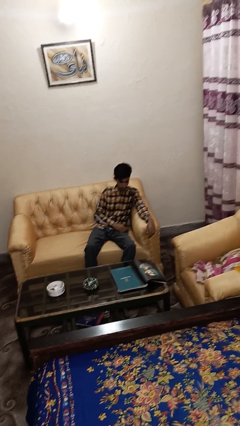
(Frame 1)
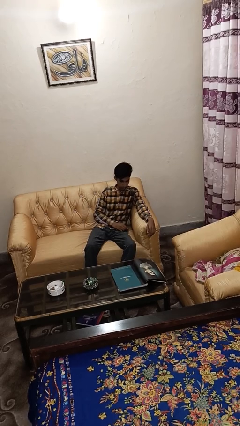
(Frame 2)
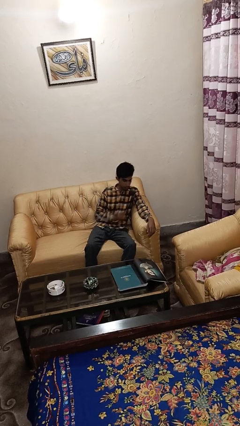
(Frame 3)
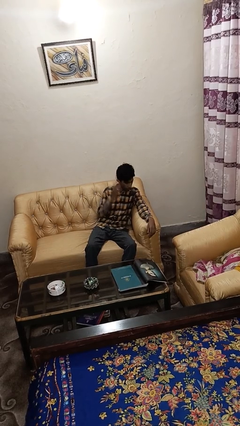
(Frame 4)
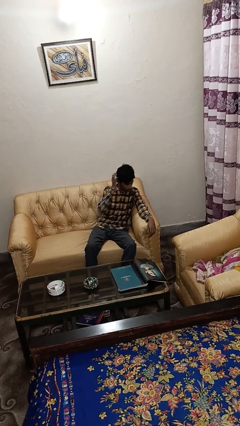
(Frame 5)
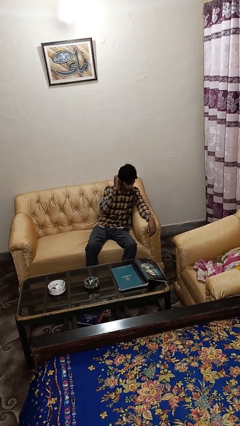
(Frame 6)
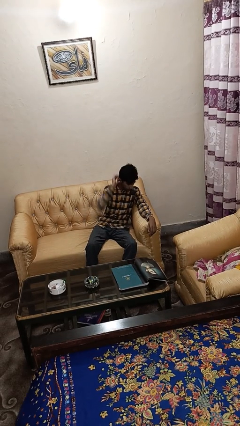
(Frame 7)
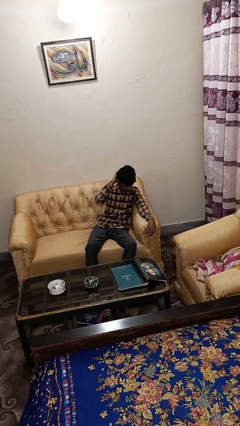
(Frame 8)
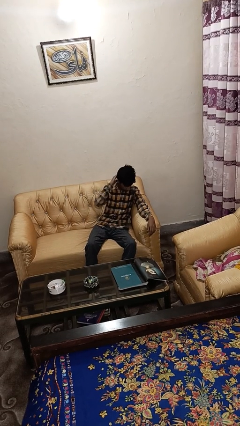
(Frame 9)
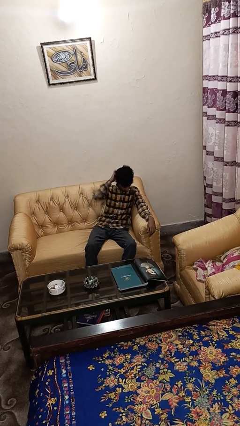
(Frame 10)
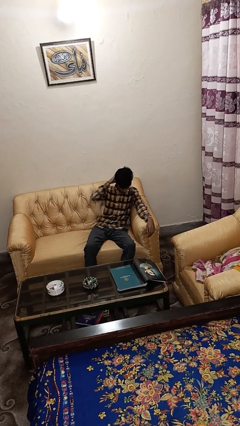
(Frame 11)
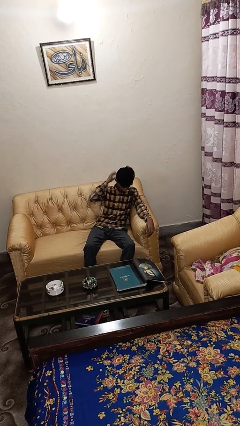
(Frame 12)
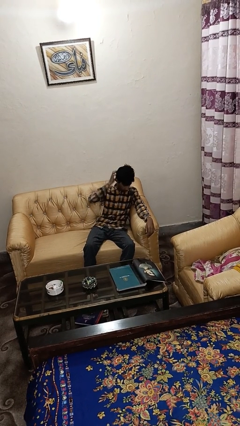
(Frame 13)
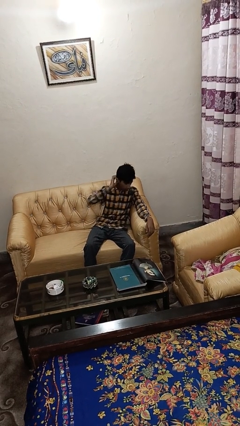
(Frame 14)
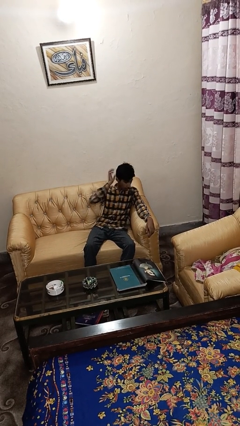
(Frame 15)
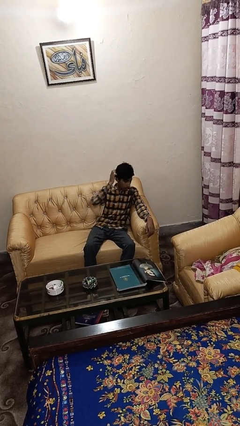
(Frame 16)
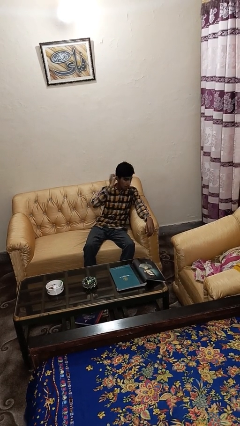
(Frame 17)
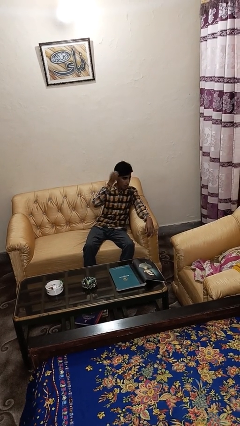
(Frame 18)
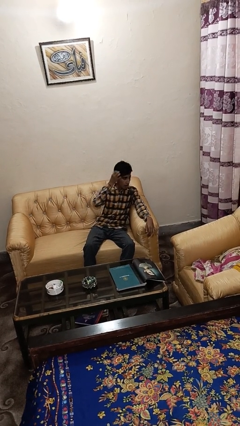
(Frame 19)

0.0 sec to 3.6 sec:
person strokes hair

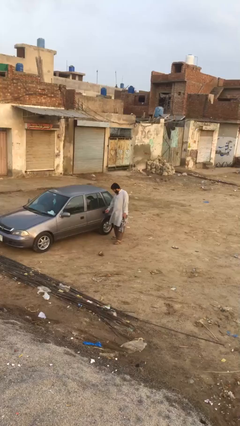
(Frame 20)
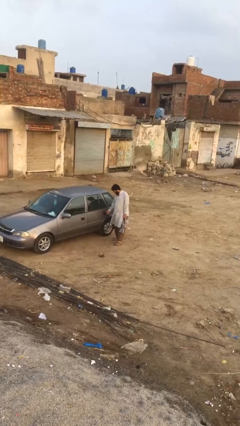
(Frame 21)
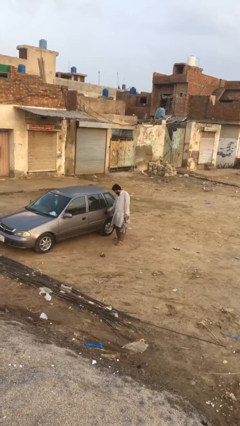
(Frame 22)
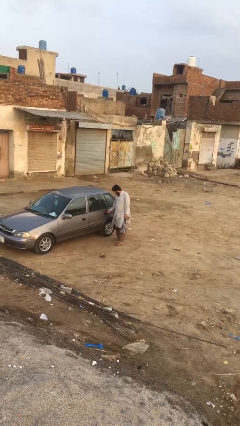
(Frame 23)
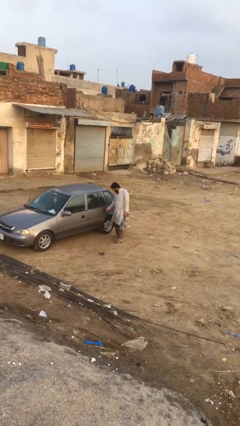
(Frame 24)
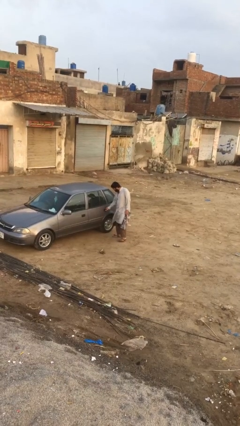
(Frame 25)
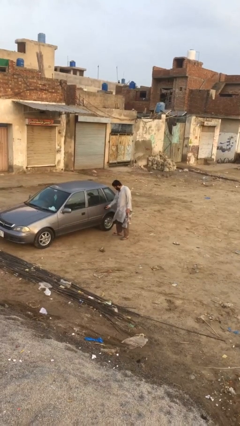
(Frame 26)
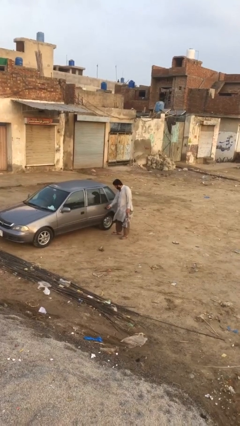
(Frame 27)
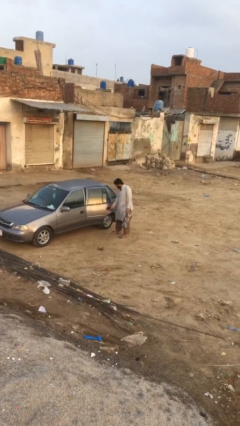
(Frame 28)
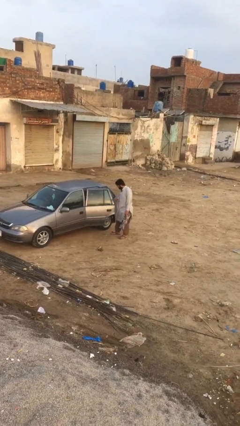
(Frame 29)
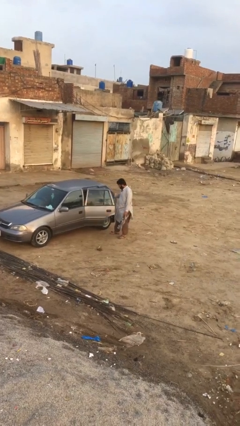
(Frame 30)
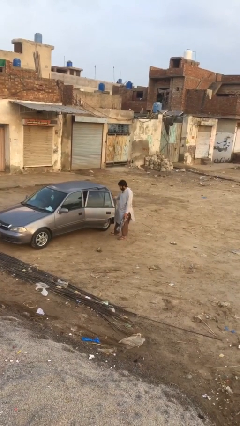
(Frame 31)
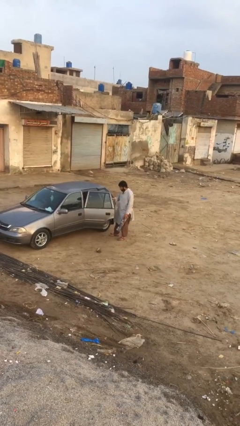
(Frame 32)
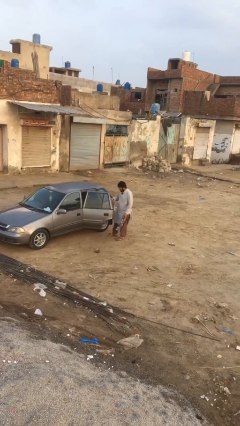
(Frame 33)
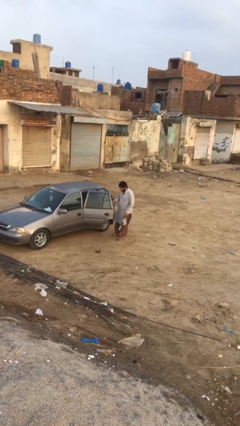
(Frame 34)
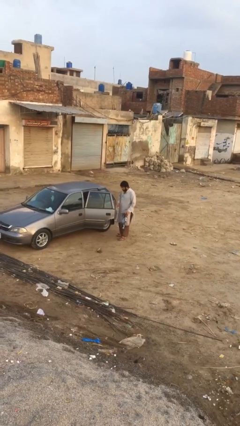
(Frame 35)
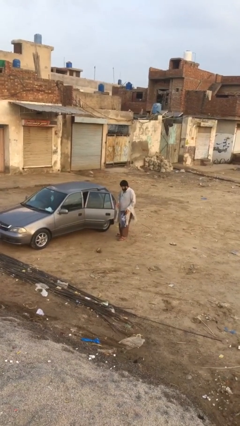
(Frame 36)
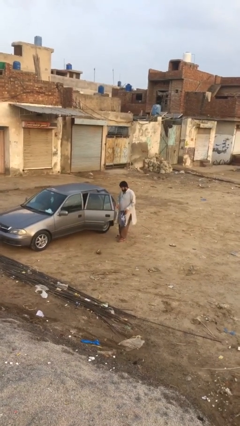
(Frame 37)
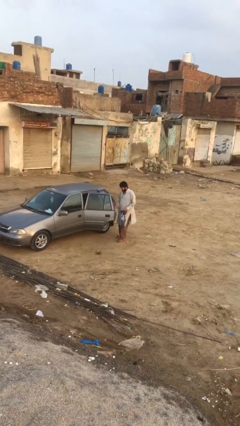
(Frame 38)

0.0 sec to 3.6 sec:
person opens car door

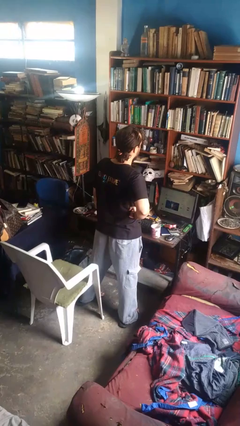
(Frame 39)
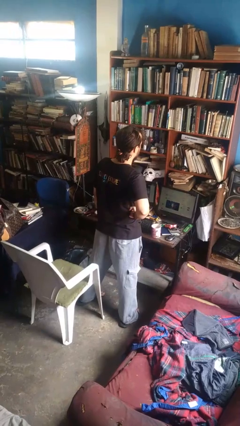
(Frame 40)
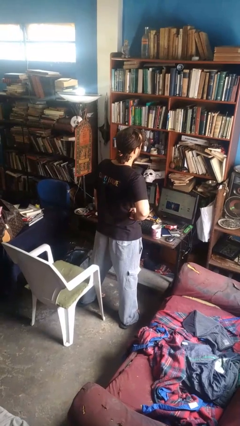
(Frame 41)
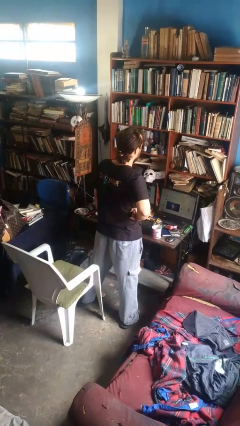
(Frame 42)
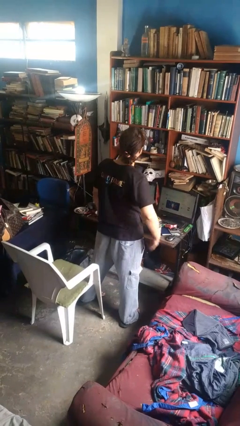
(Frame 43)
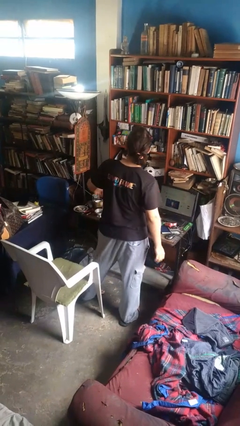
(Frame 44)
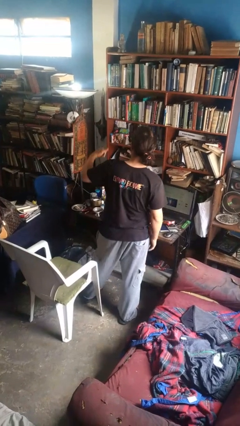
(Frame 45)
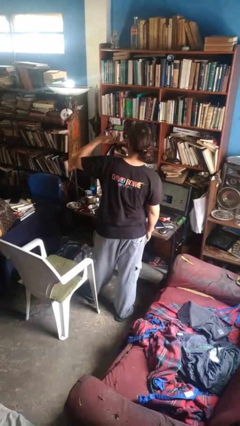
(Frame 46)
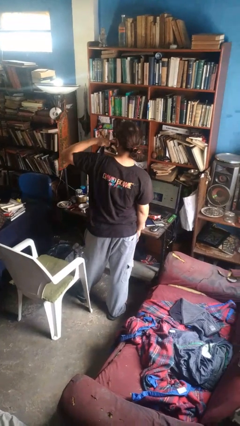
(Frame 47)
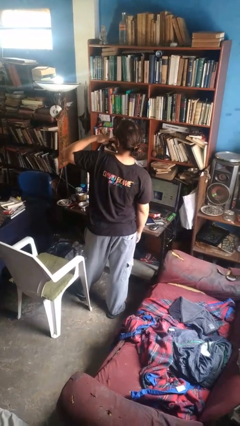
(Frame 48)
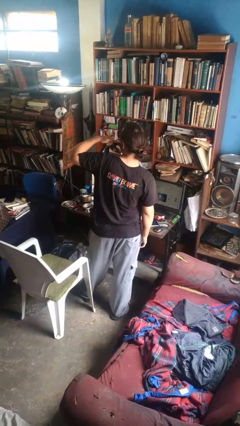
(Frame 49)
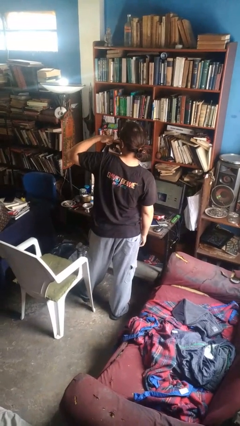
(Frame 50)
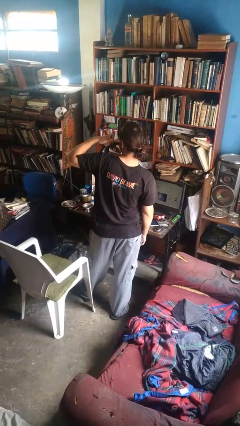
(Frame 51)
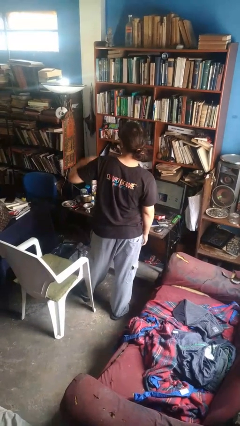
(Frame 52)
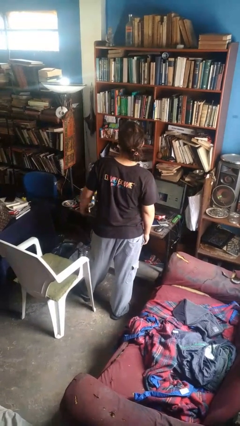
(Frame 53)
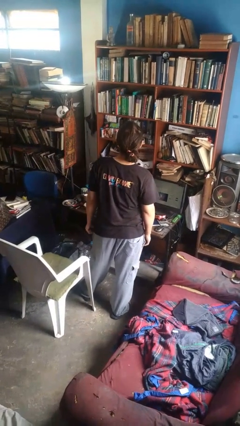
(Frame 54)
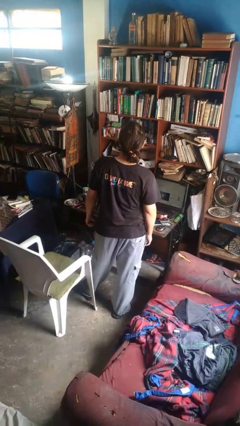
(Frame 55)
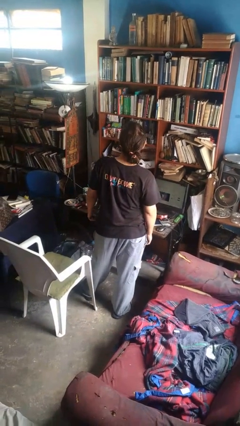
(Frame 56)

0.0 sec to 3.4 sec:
person gestures call me

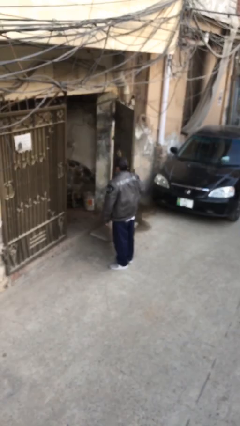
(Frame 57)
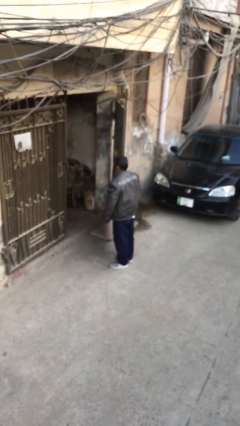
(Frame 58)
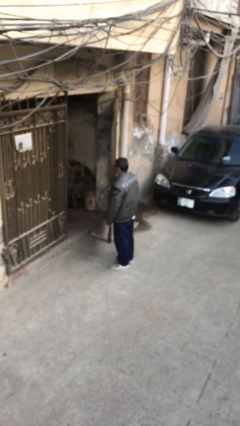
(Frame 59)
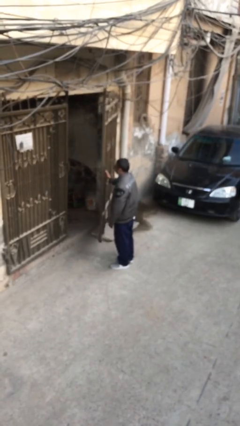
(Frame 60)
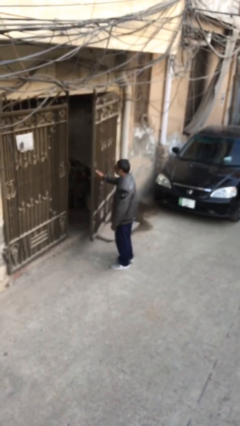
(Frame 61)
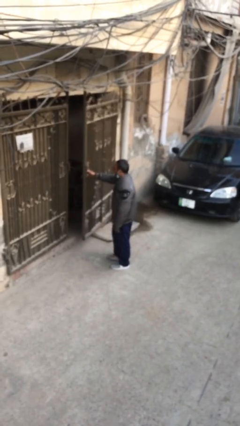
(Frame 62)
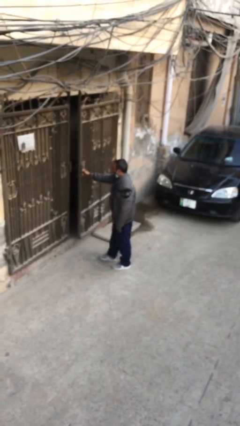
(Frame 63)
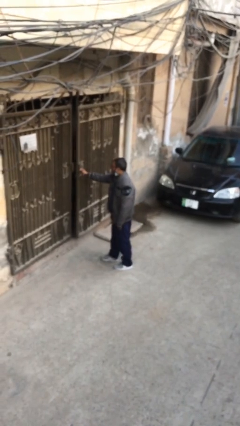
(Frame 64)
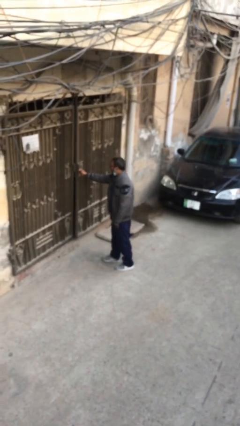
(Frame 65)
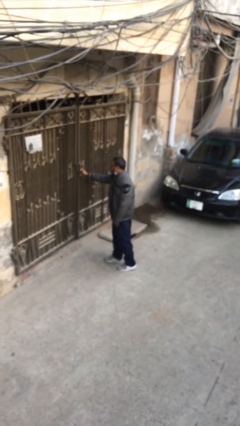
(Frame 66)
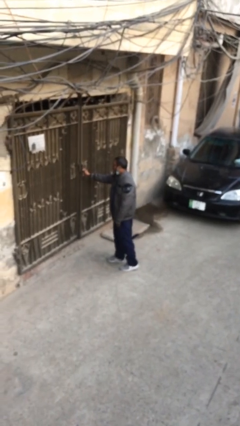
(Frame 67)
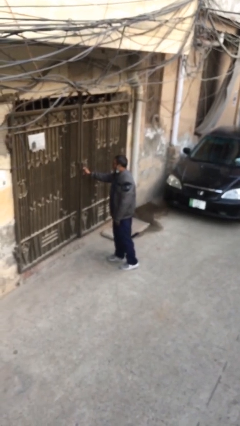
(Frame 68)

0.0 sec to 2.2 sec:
person closes facility door

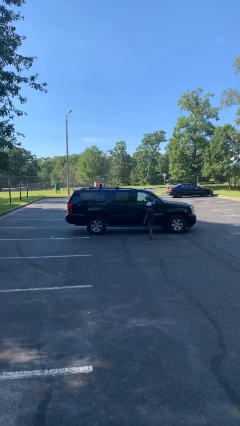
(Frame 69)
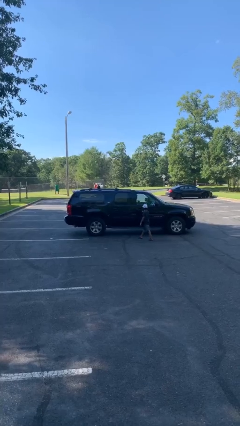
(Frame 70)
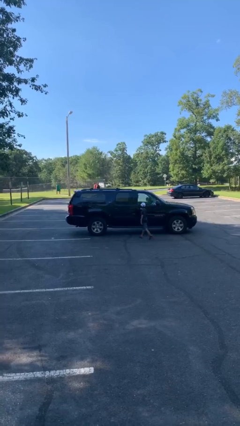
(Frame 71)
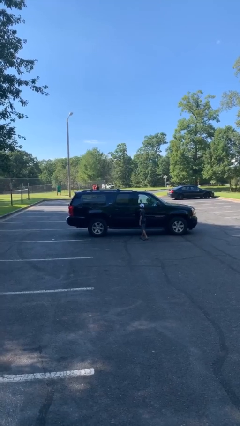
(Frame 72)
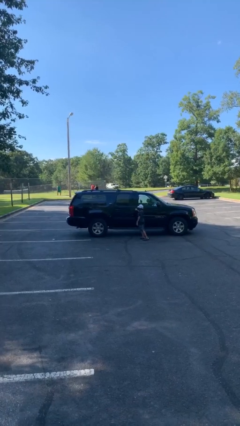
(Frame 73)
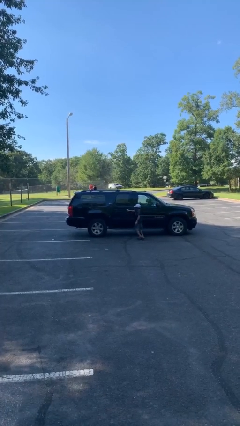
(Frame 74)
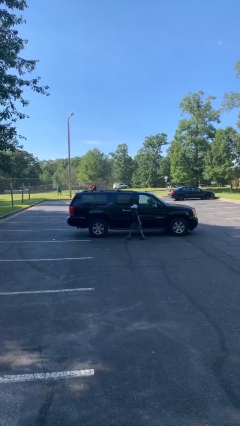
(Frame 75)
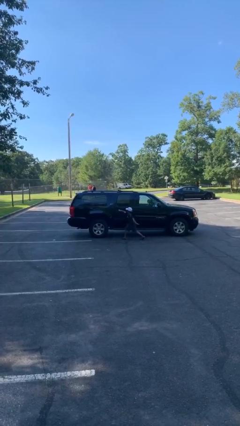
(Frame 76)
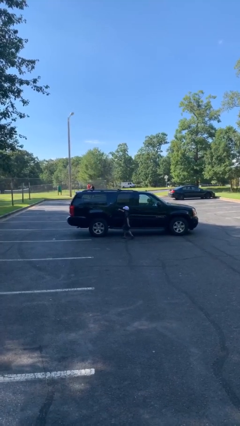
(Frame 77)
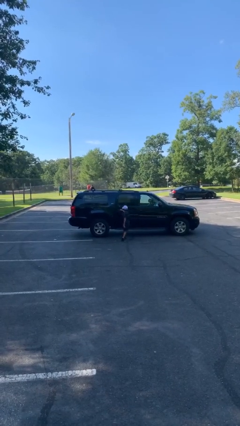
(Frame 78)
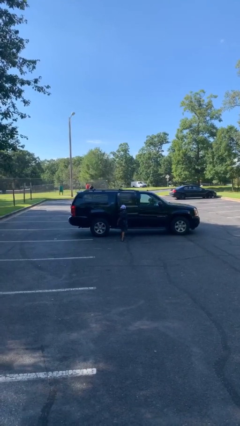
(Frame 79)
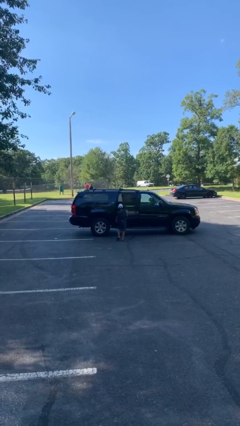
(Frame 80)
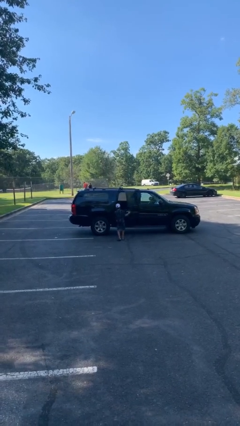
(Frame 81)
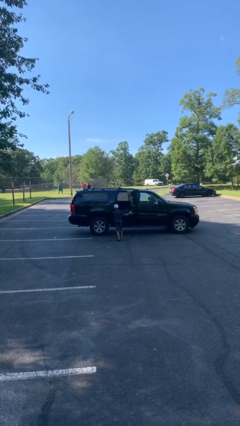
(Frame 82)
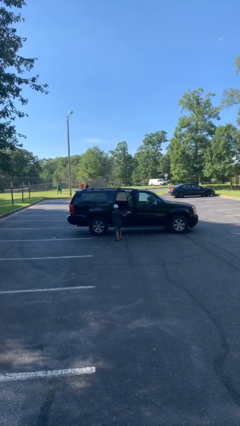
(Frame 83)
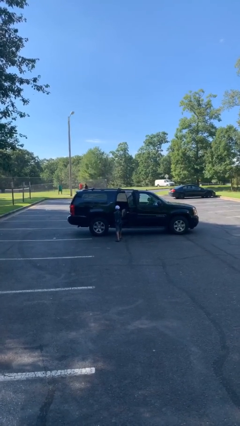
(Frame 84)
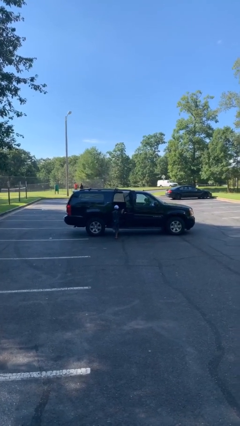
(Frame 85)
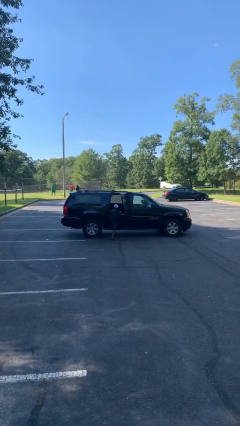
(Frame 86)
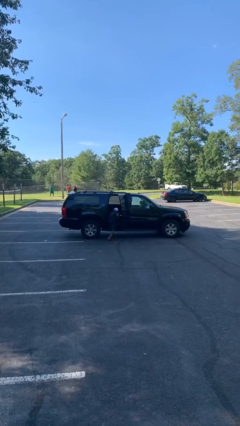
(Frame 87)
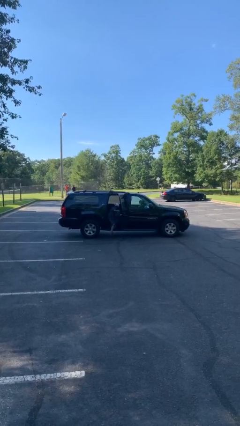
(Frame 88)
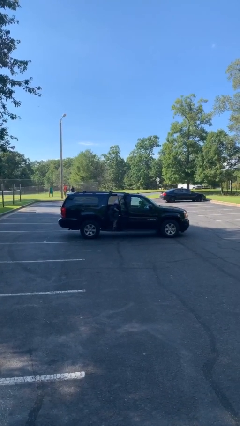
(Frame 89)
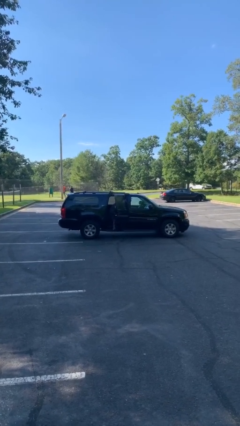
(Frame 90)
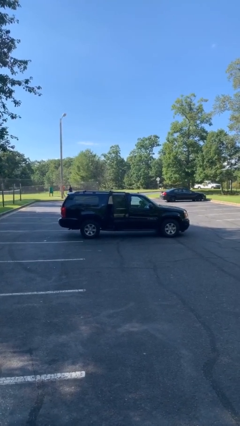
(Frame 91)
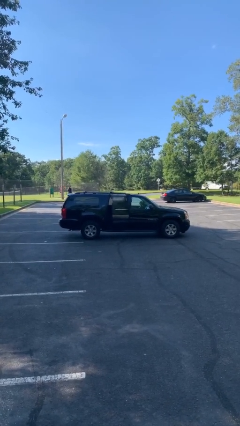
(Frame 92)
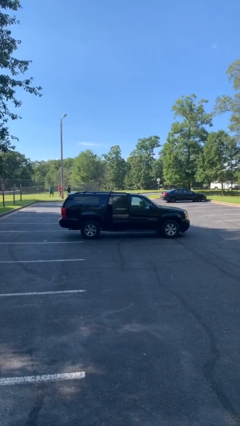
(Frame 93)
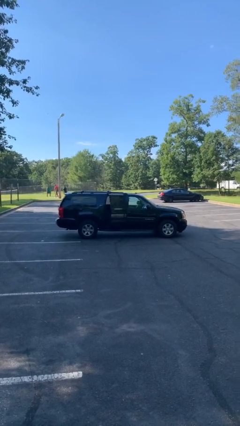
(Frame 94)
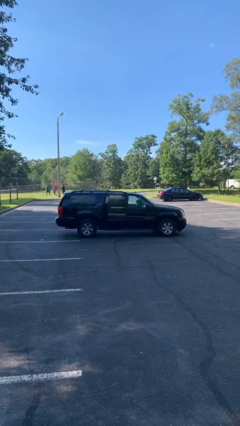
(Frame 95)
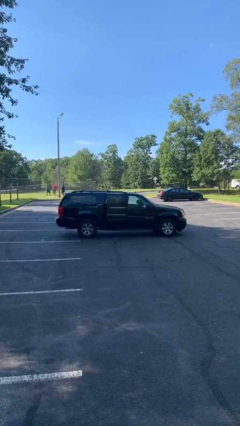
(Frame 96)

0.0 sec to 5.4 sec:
car picks up person
